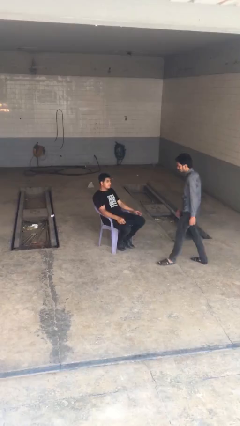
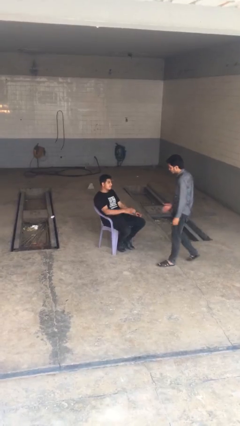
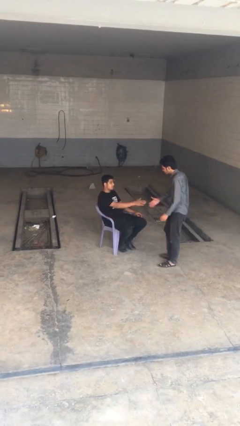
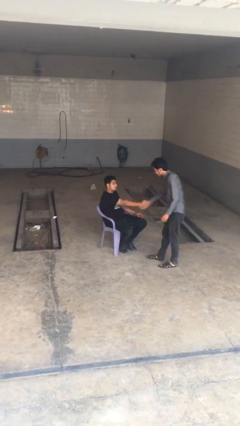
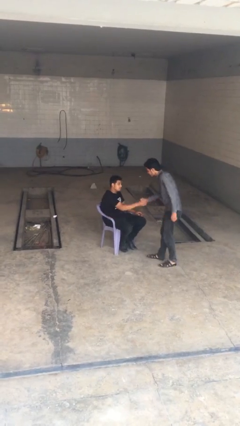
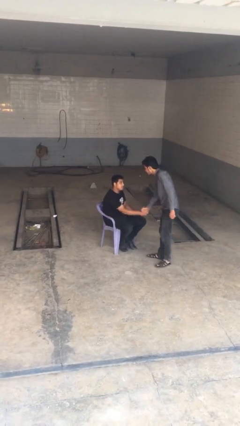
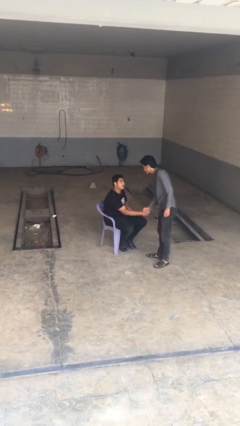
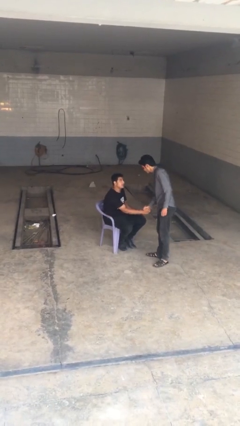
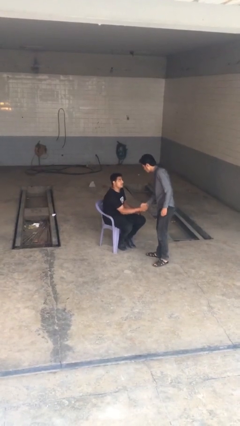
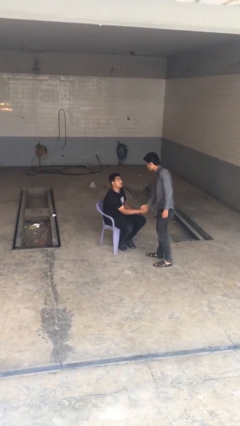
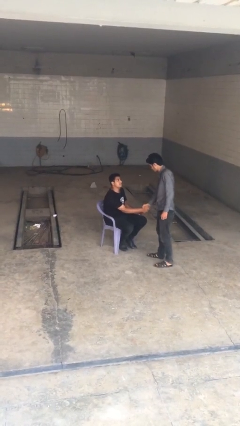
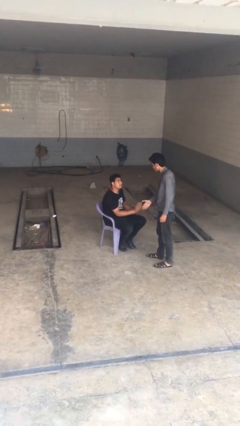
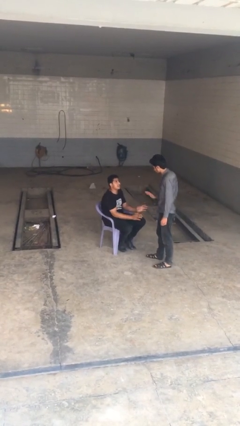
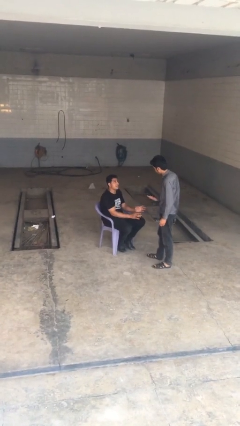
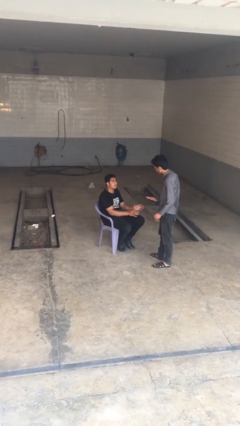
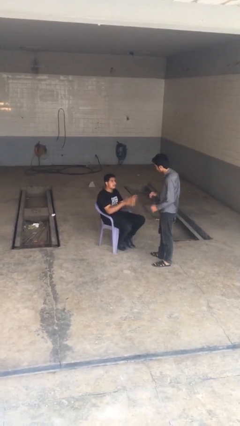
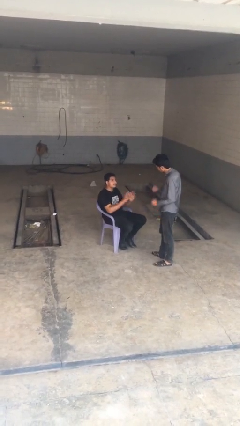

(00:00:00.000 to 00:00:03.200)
person shakes hand

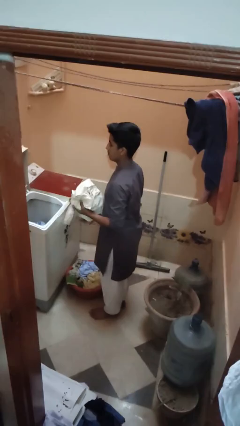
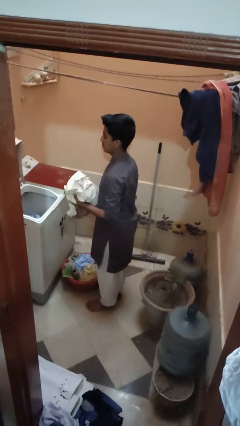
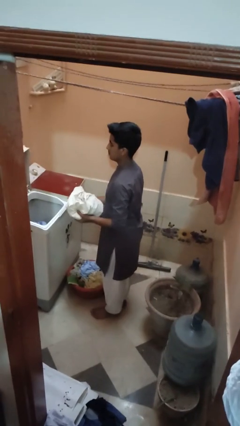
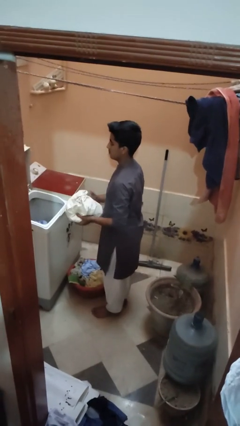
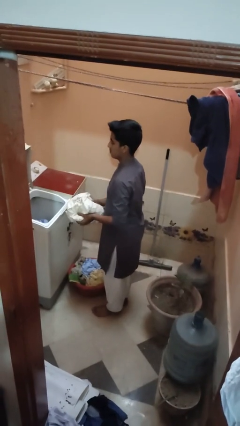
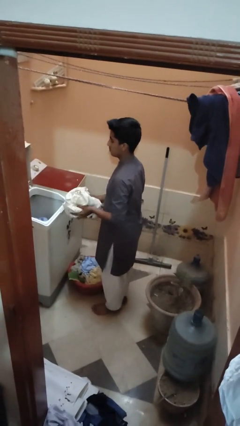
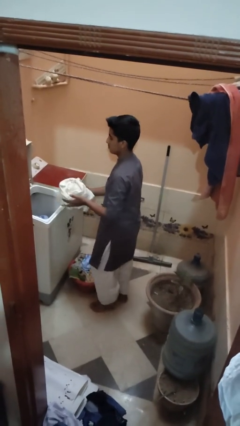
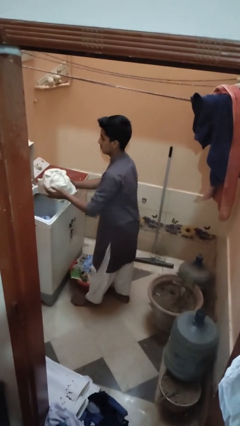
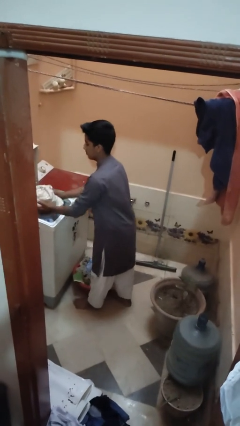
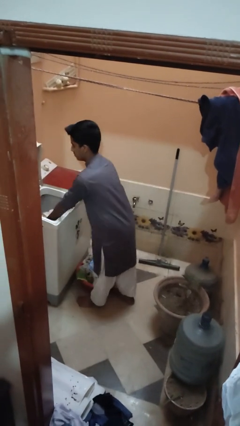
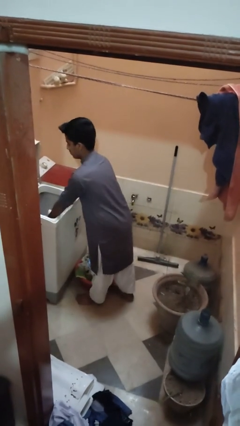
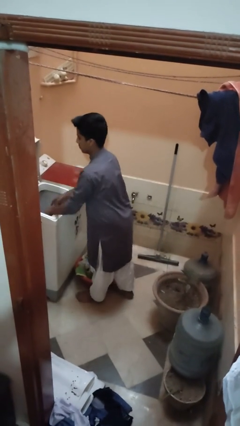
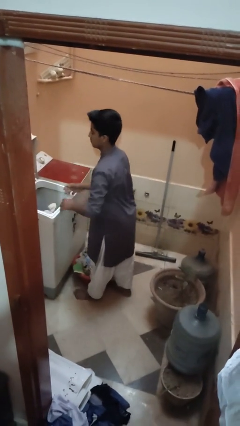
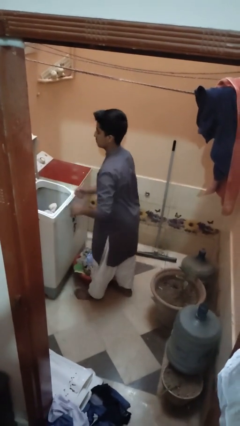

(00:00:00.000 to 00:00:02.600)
person loads clotheswasher

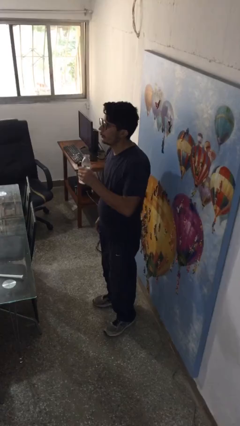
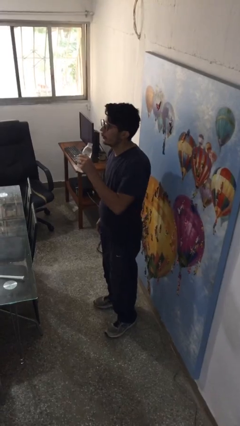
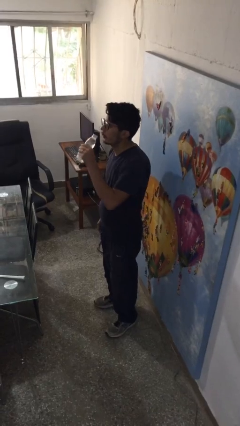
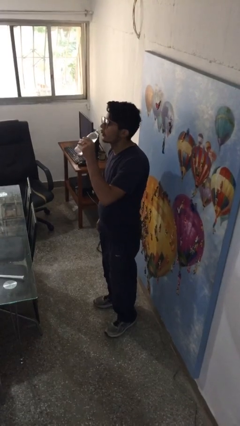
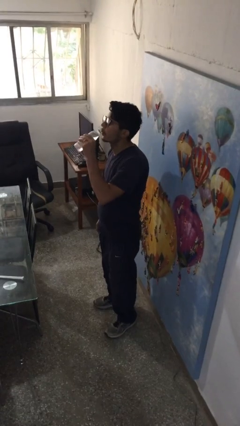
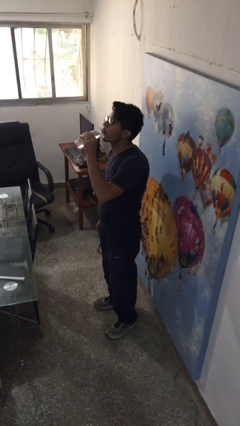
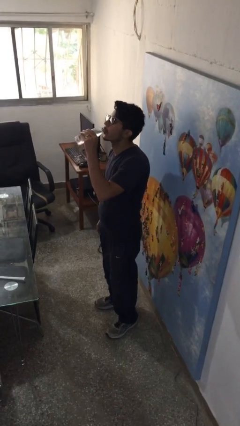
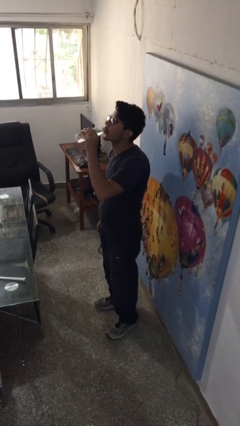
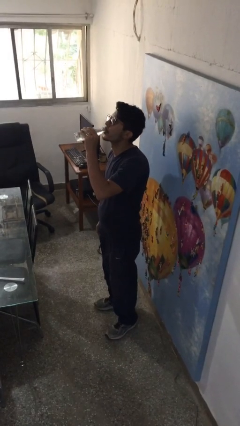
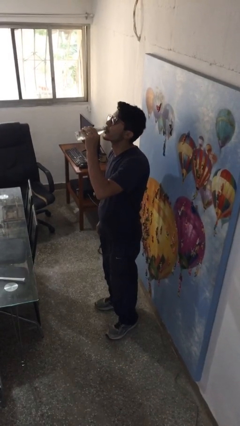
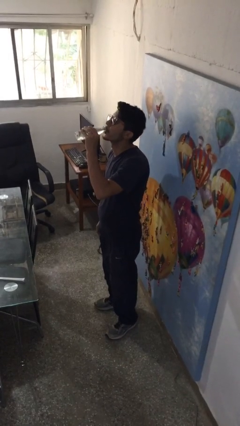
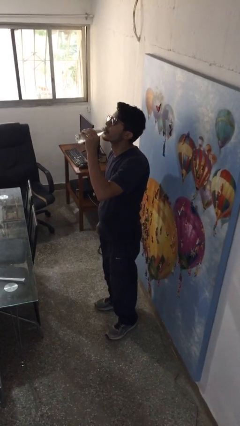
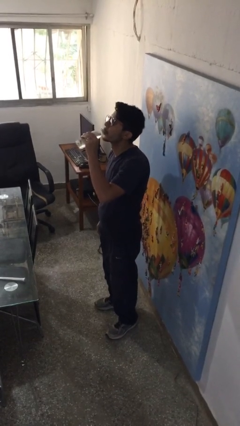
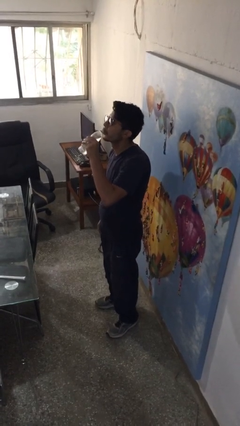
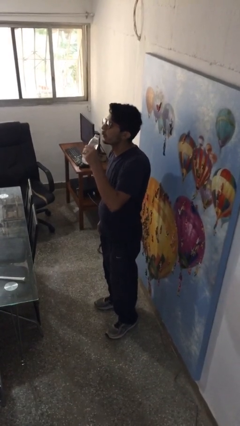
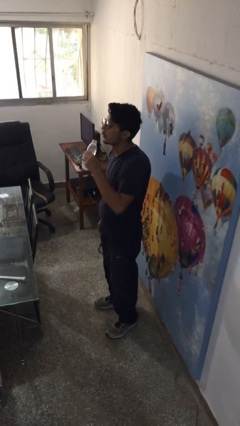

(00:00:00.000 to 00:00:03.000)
person drinks from bottle

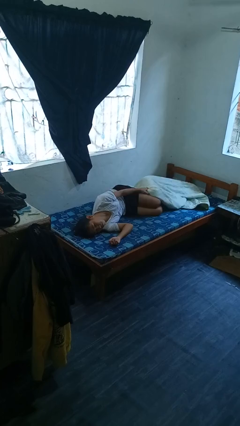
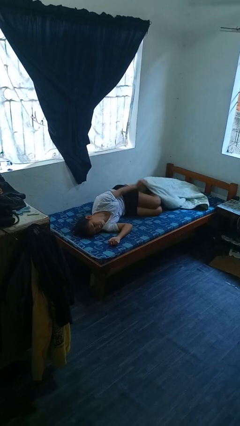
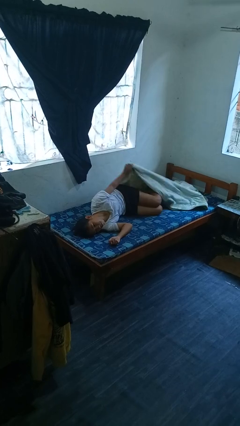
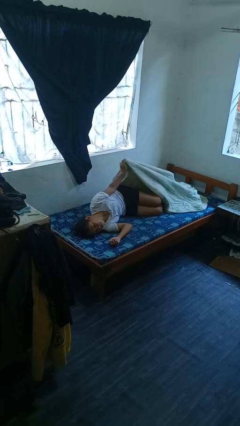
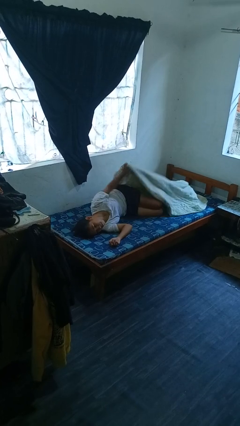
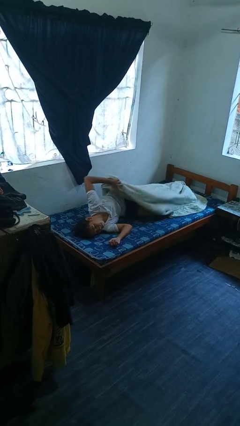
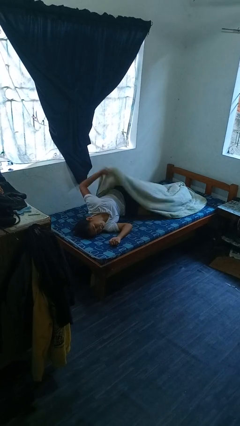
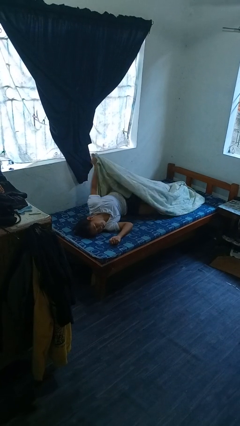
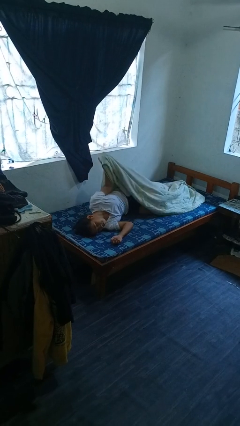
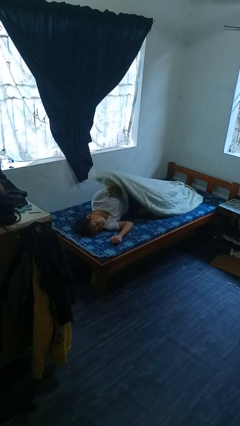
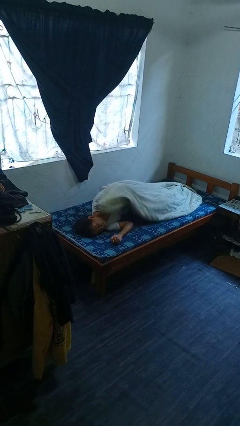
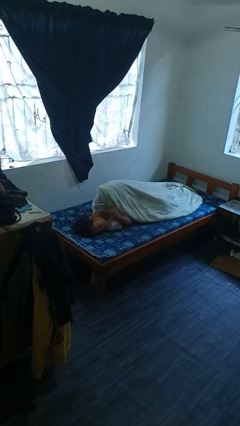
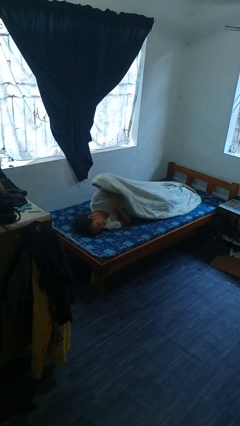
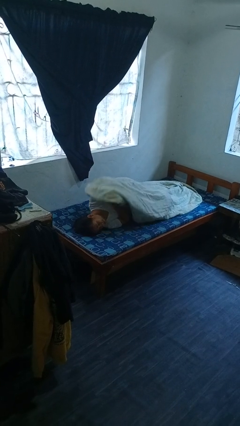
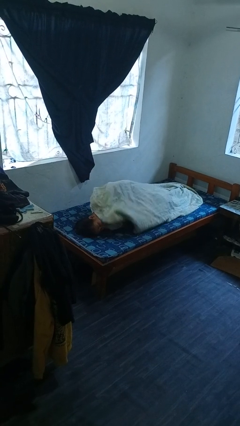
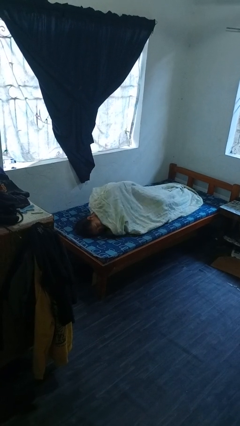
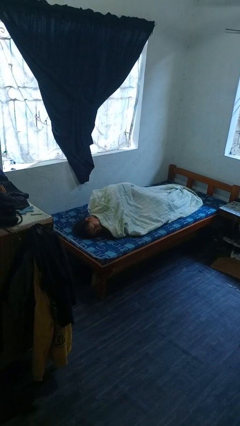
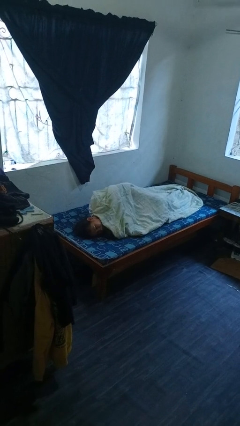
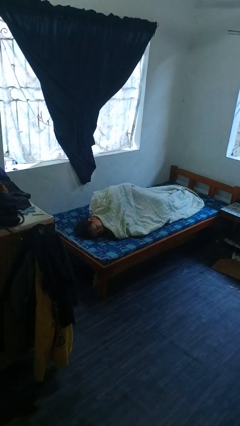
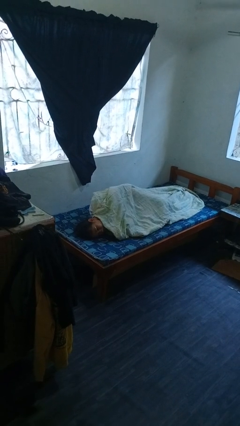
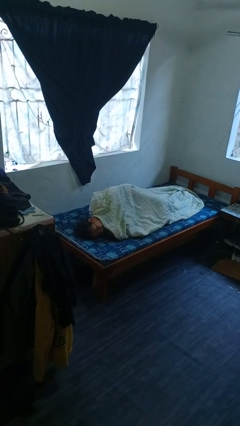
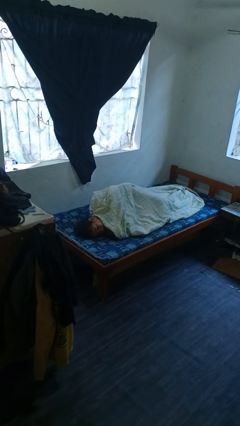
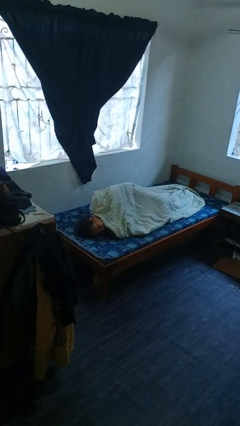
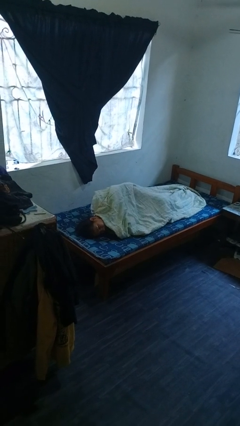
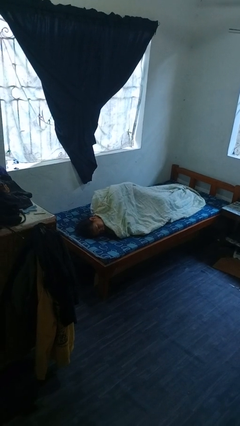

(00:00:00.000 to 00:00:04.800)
person covers with bedsheets

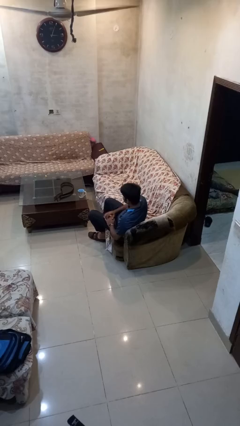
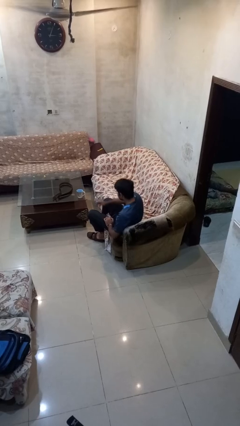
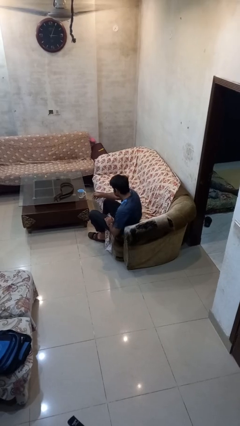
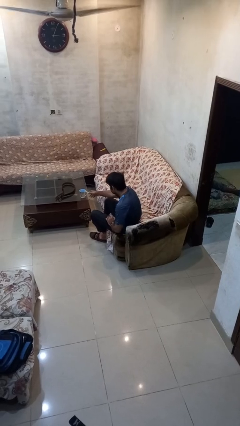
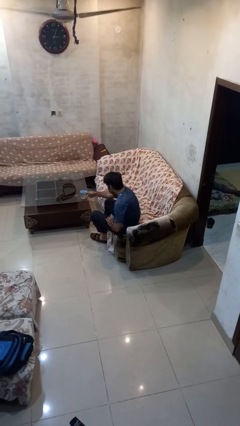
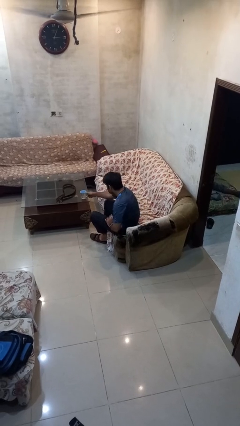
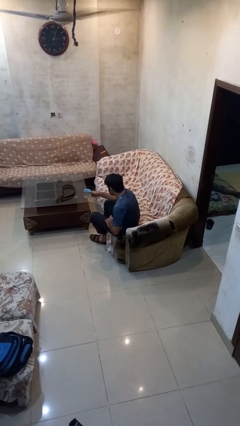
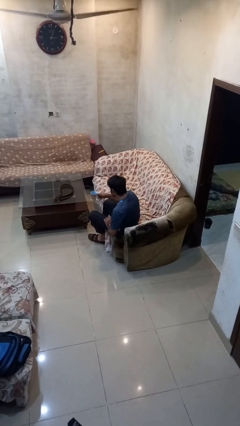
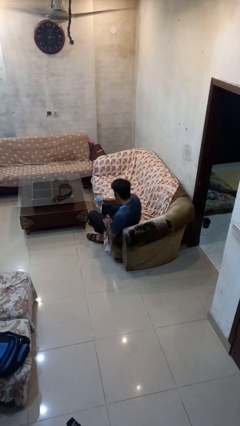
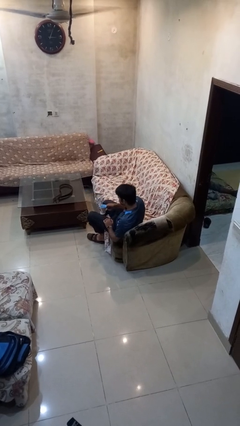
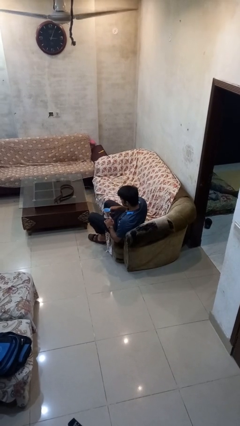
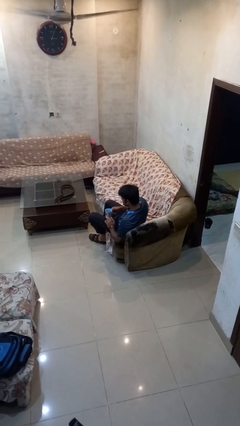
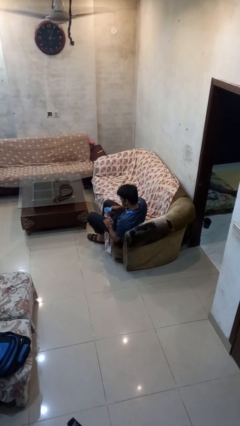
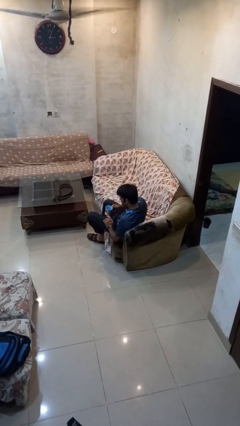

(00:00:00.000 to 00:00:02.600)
person picks up object from table

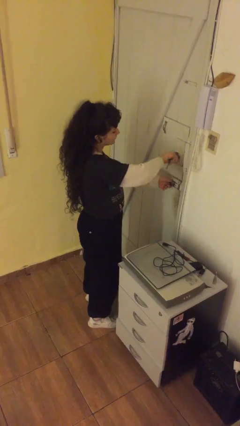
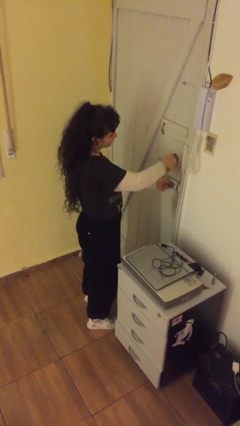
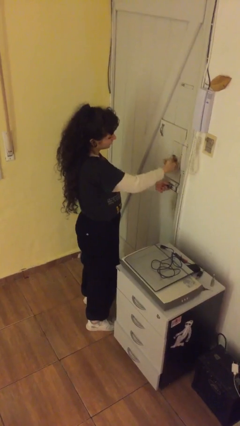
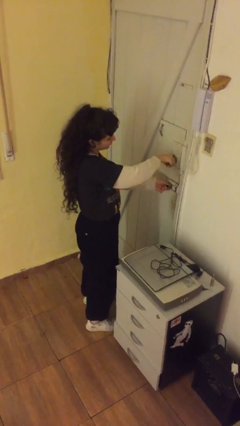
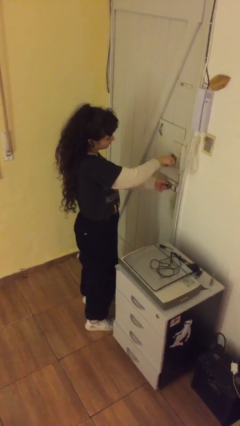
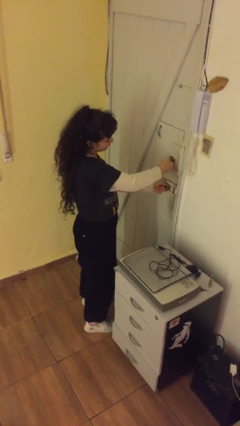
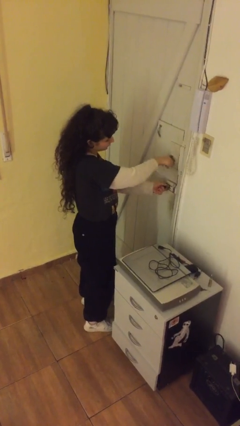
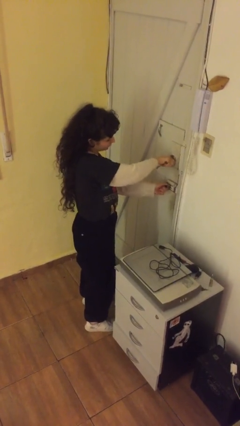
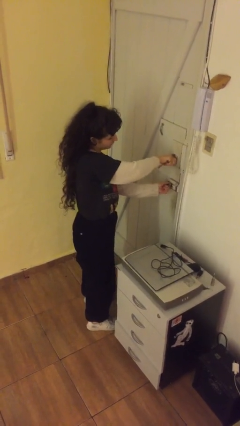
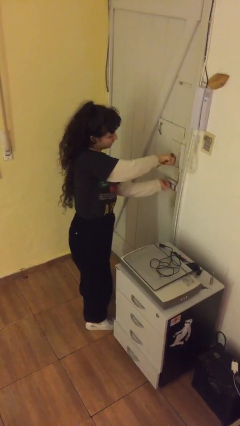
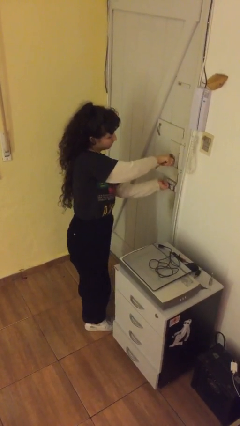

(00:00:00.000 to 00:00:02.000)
person unlocks door with keys
